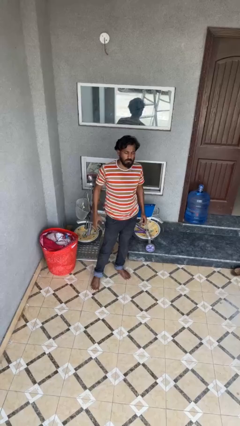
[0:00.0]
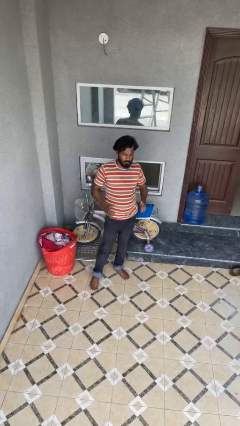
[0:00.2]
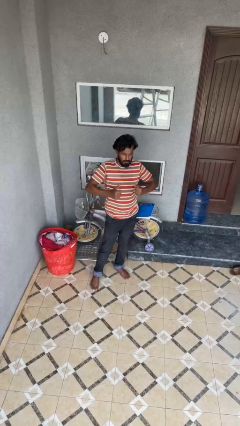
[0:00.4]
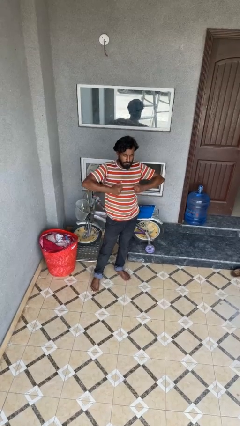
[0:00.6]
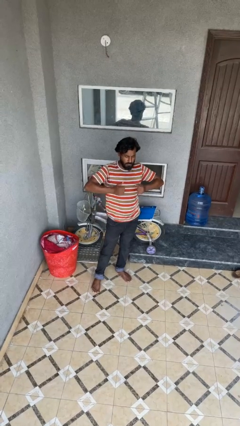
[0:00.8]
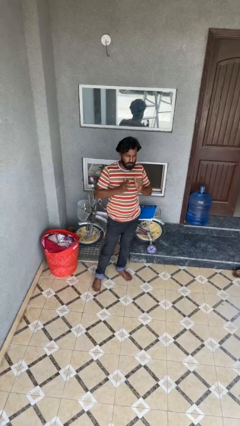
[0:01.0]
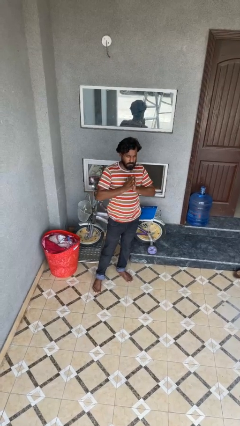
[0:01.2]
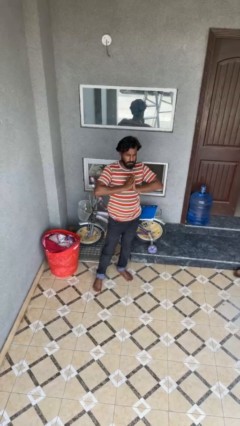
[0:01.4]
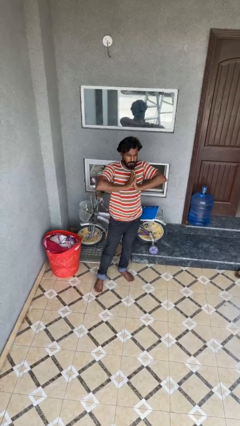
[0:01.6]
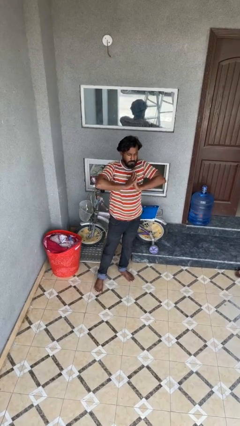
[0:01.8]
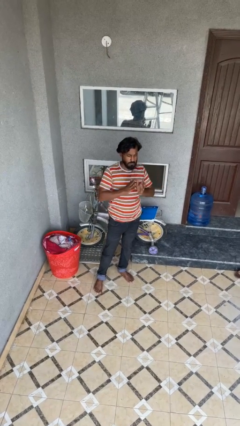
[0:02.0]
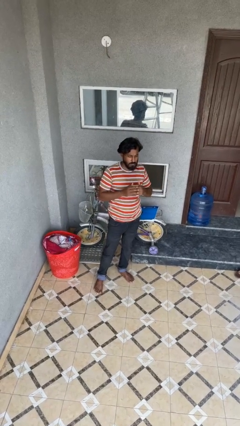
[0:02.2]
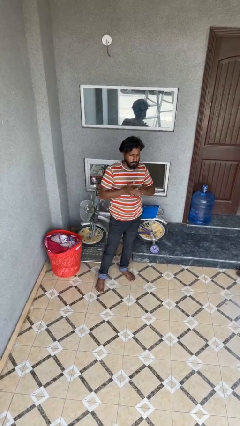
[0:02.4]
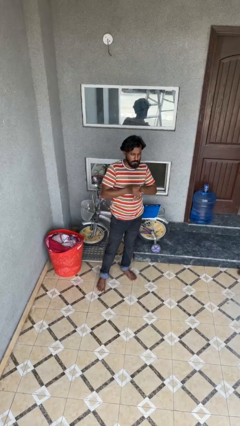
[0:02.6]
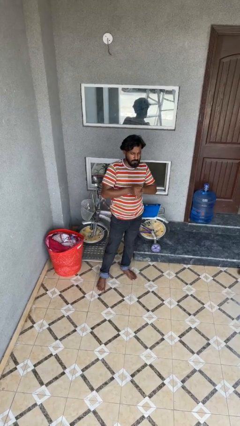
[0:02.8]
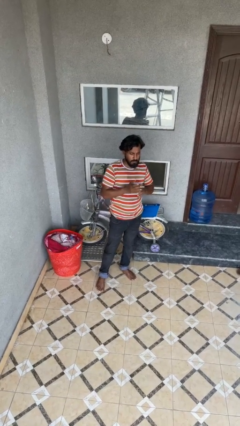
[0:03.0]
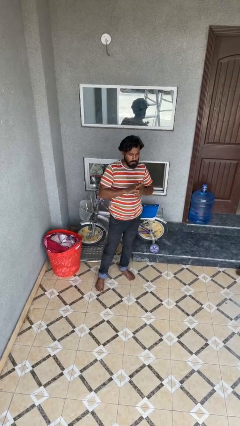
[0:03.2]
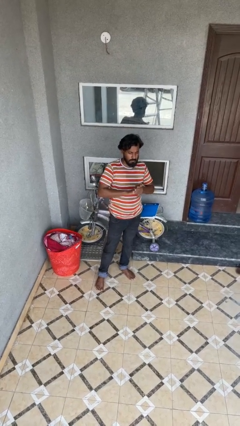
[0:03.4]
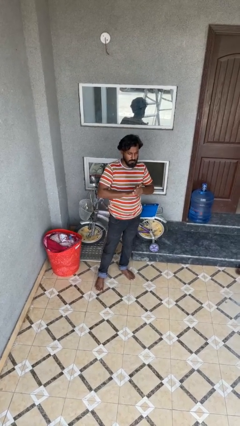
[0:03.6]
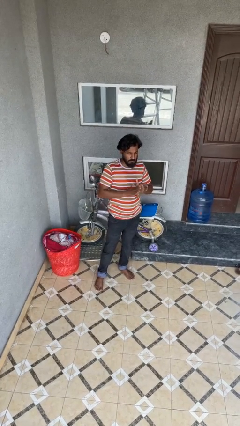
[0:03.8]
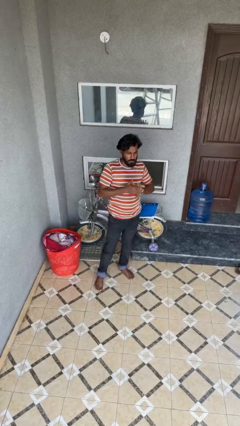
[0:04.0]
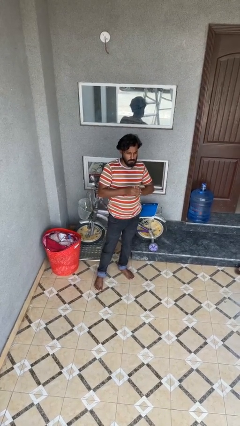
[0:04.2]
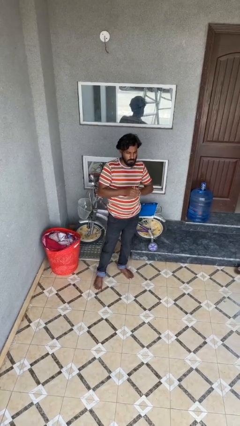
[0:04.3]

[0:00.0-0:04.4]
person cracks knuckles

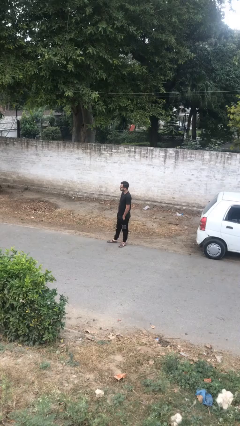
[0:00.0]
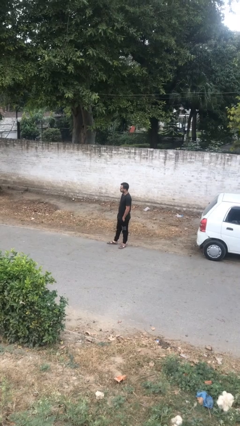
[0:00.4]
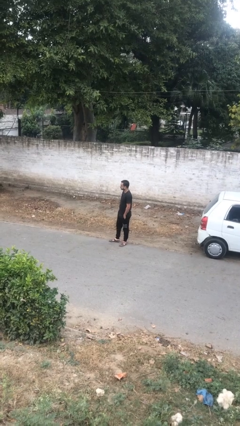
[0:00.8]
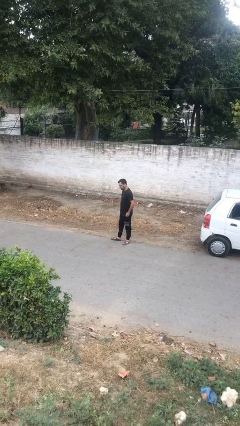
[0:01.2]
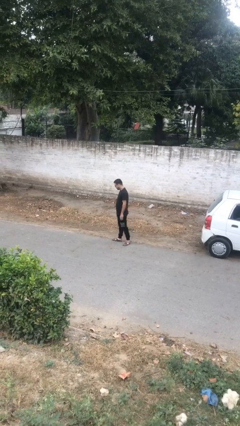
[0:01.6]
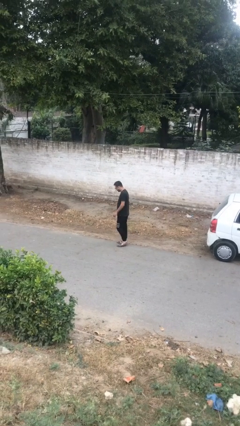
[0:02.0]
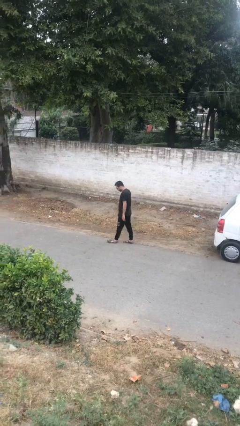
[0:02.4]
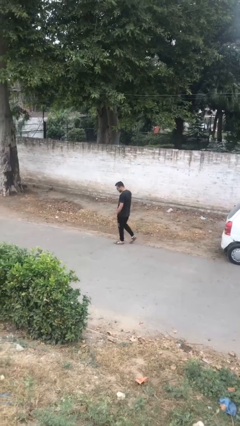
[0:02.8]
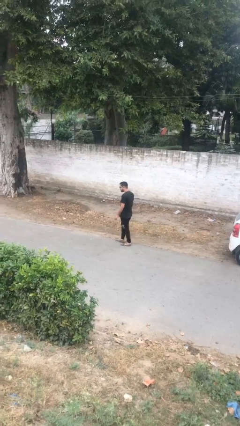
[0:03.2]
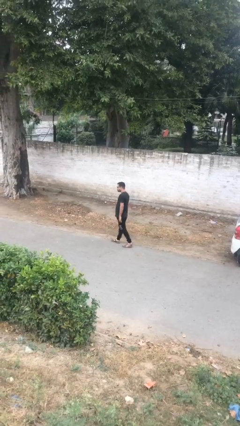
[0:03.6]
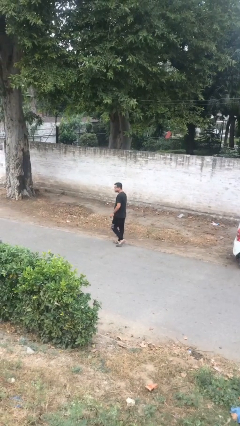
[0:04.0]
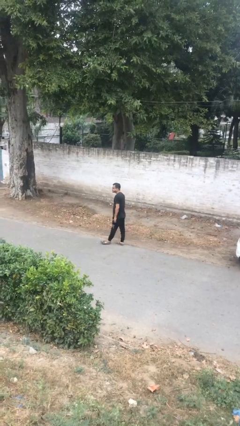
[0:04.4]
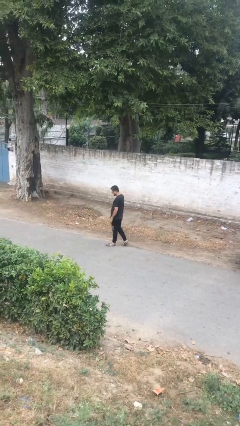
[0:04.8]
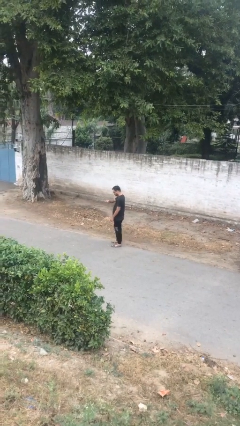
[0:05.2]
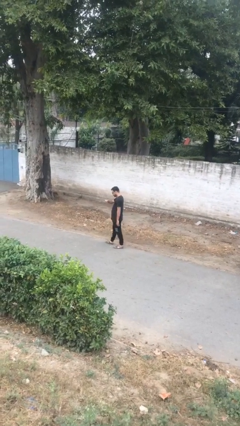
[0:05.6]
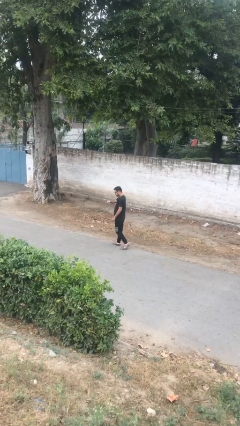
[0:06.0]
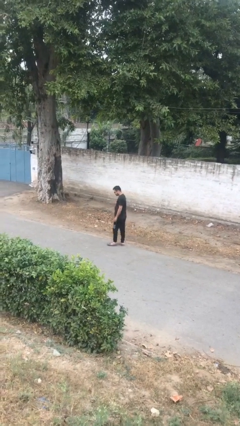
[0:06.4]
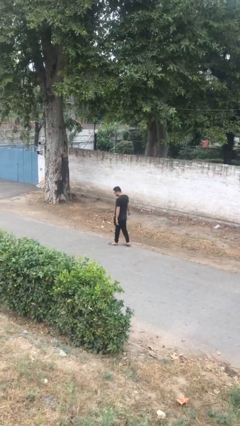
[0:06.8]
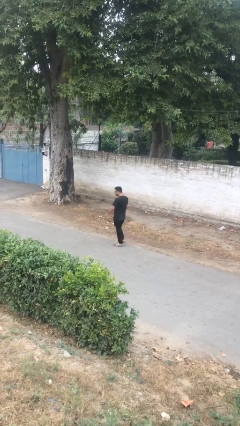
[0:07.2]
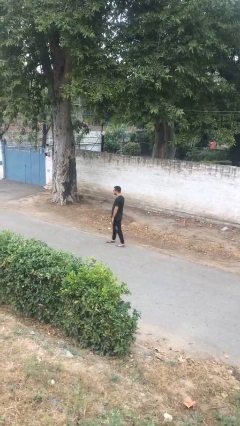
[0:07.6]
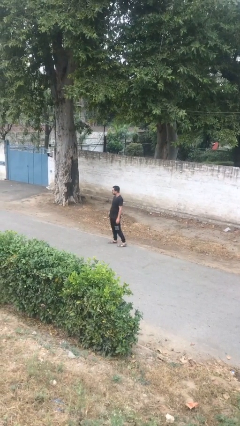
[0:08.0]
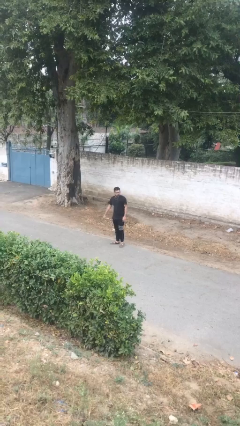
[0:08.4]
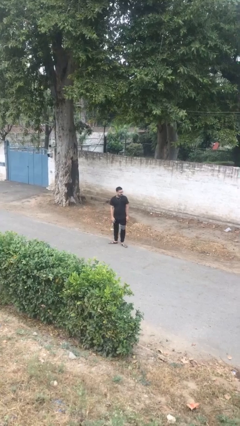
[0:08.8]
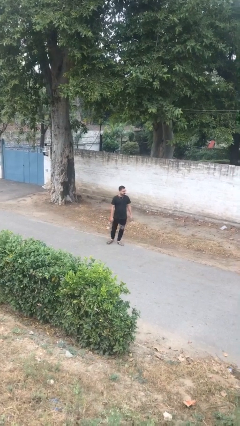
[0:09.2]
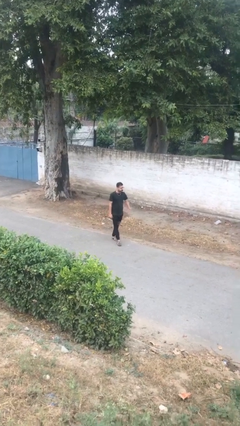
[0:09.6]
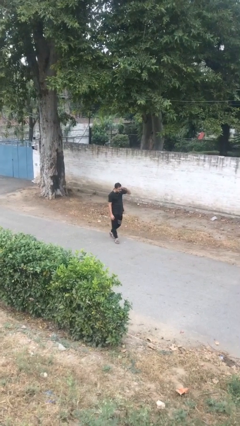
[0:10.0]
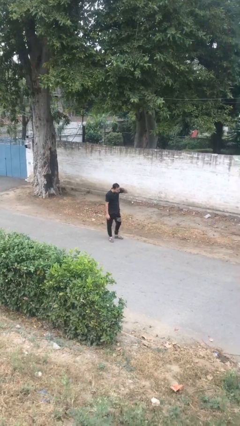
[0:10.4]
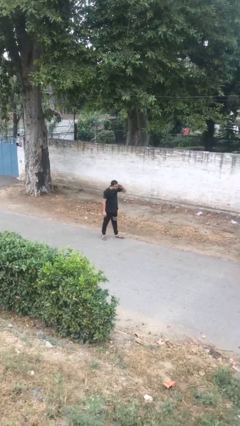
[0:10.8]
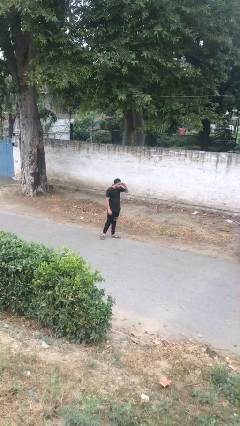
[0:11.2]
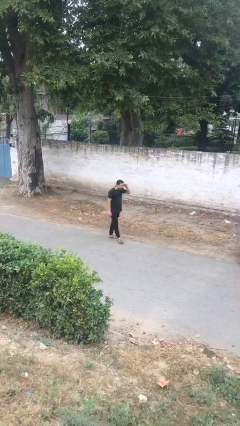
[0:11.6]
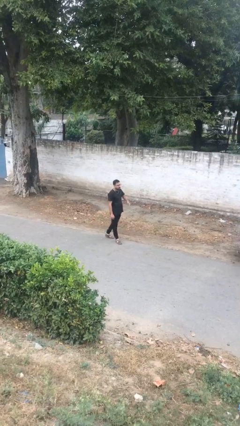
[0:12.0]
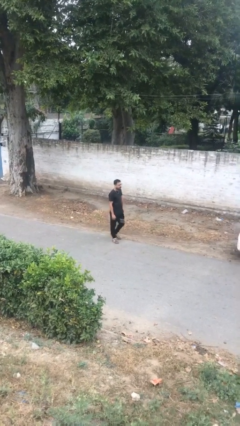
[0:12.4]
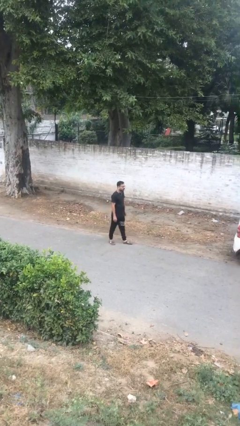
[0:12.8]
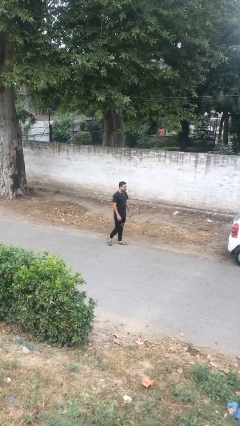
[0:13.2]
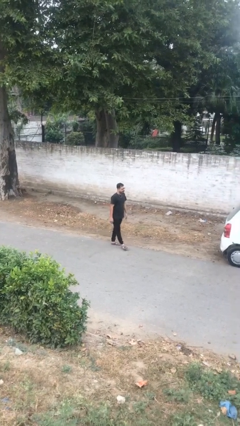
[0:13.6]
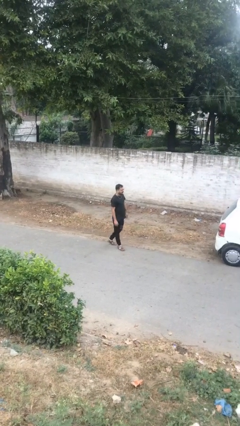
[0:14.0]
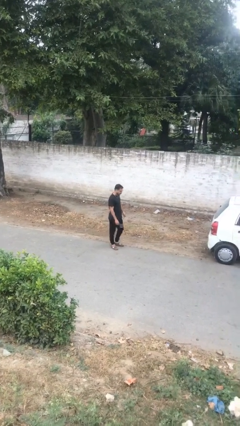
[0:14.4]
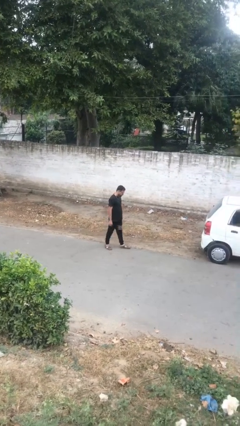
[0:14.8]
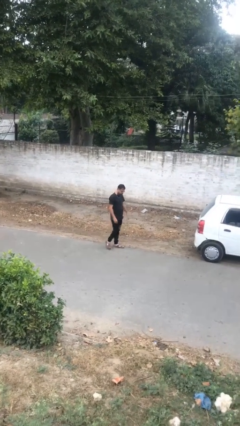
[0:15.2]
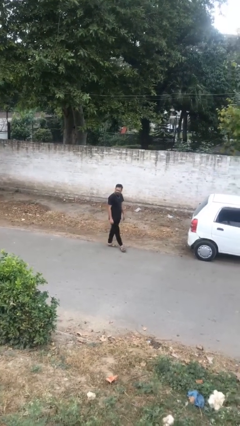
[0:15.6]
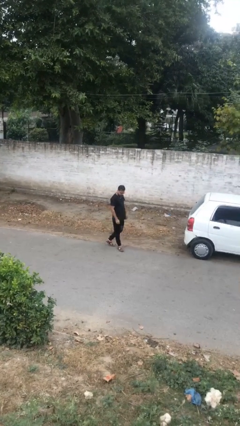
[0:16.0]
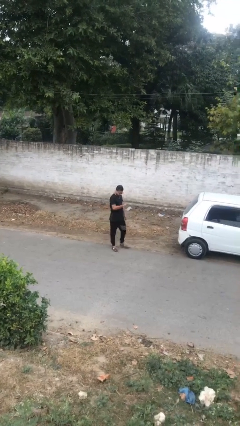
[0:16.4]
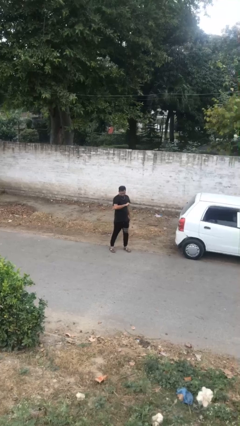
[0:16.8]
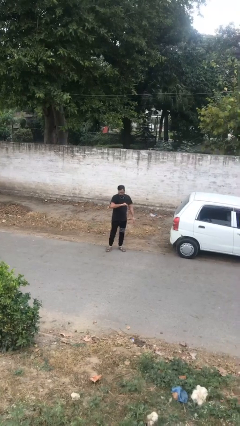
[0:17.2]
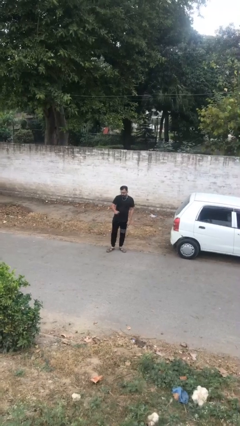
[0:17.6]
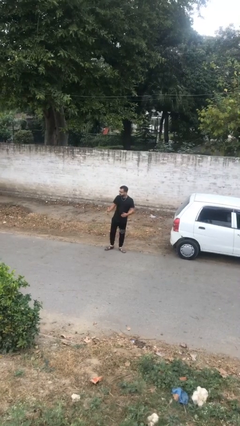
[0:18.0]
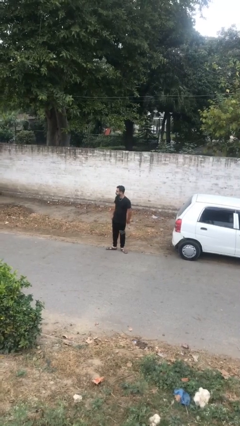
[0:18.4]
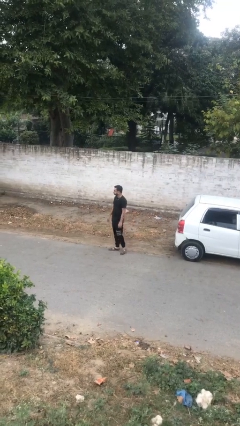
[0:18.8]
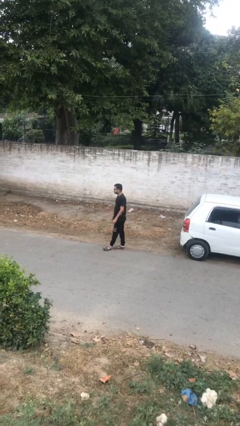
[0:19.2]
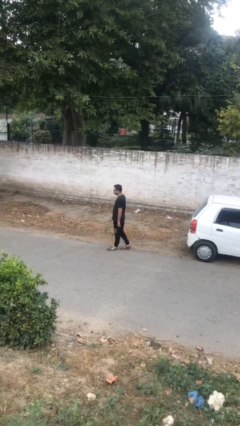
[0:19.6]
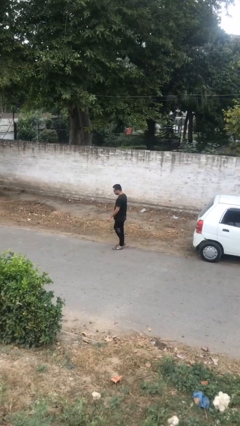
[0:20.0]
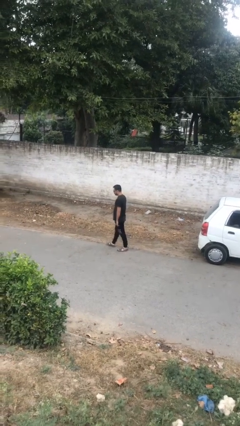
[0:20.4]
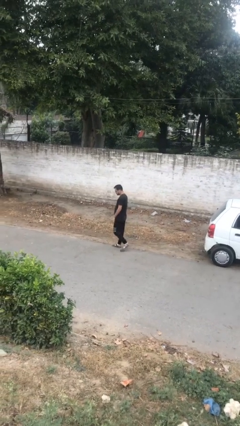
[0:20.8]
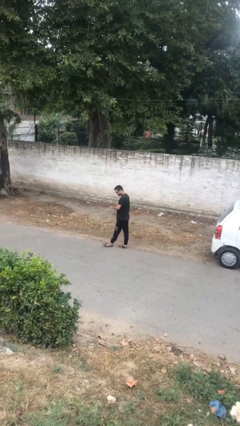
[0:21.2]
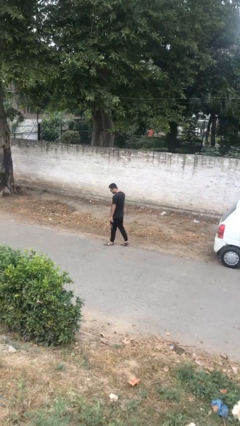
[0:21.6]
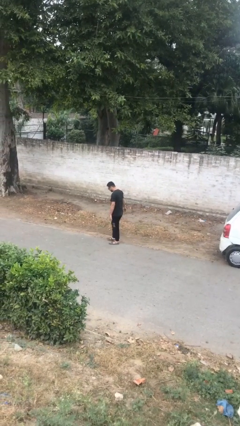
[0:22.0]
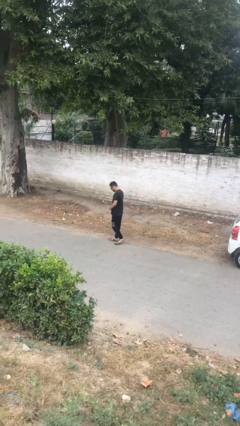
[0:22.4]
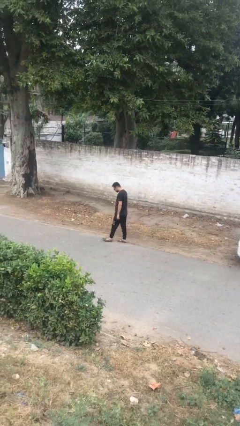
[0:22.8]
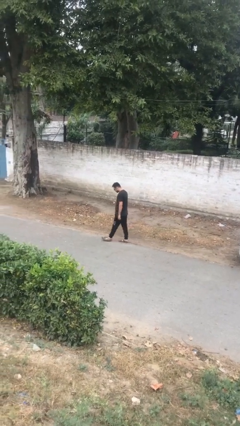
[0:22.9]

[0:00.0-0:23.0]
person walks

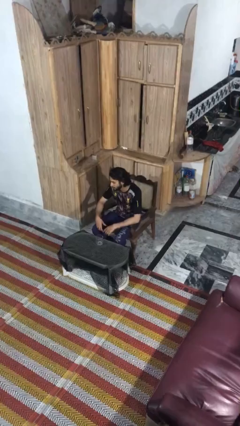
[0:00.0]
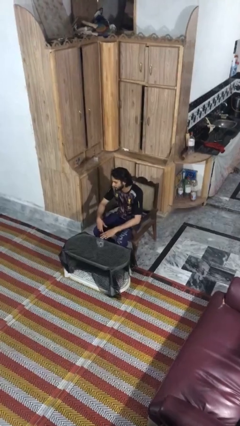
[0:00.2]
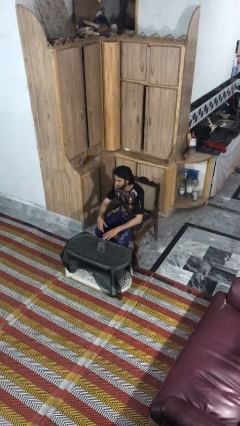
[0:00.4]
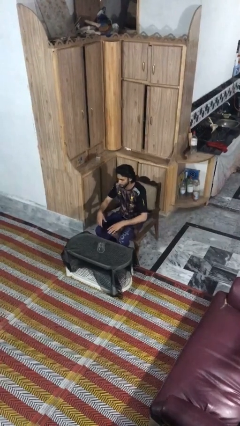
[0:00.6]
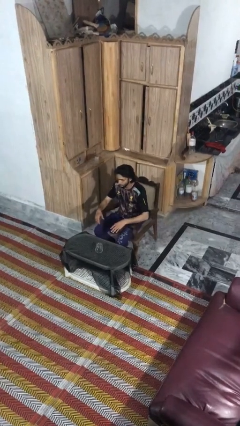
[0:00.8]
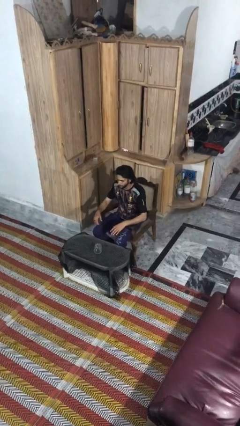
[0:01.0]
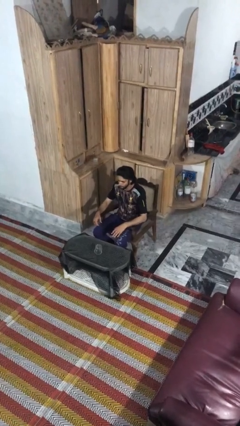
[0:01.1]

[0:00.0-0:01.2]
person knocks over glass

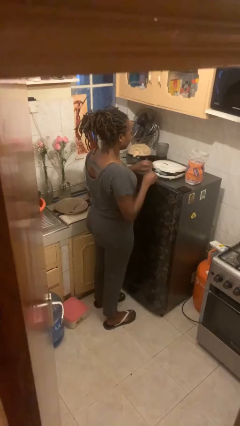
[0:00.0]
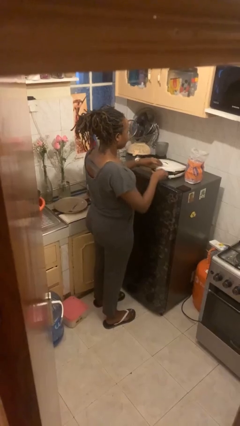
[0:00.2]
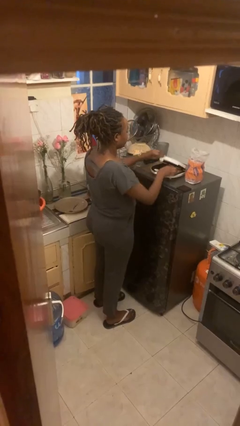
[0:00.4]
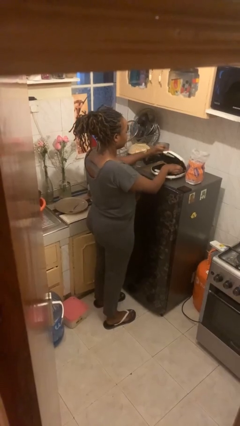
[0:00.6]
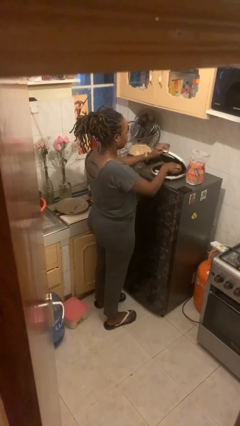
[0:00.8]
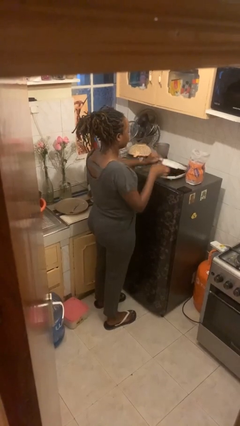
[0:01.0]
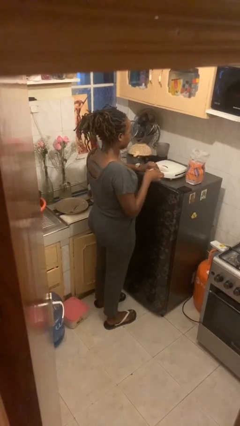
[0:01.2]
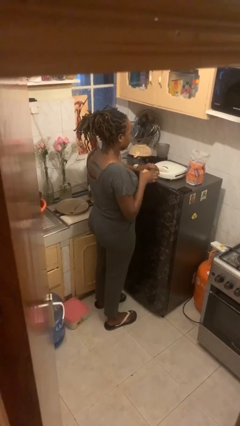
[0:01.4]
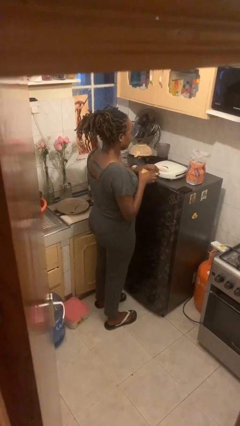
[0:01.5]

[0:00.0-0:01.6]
person takes object from toaster
